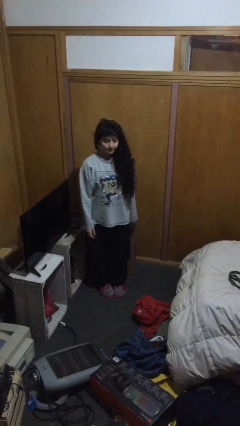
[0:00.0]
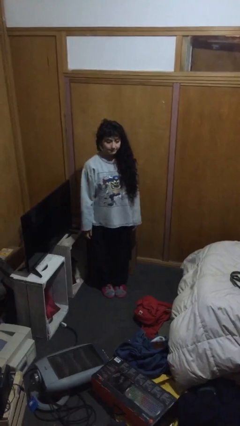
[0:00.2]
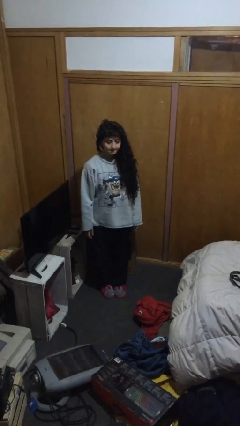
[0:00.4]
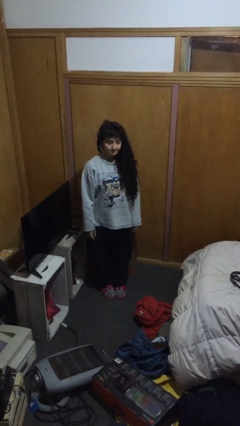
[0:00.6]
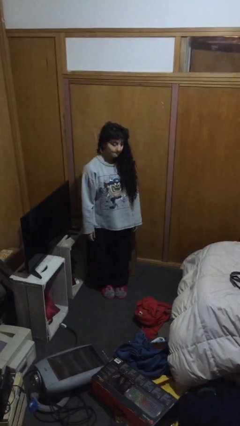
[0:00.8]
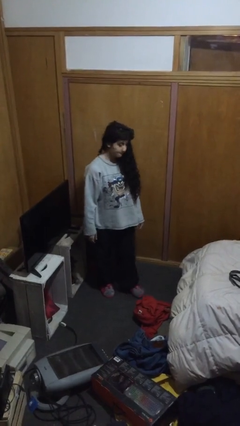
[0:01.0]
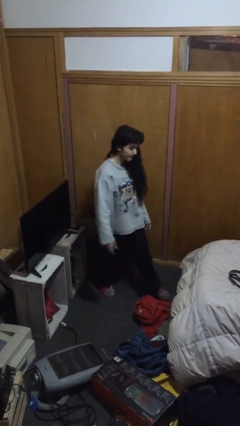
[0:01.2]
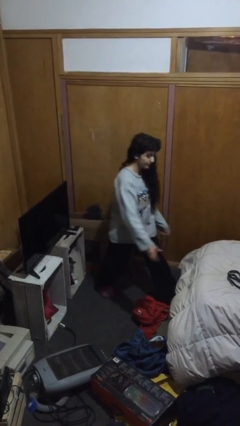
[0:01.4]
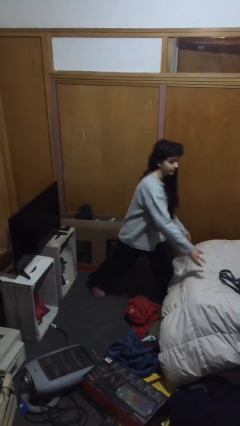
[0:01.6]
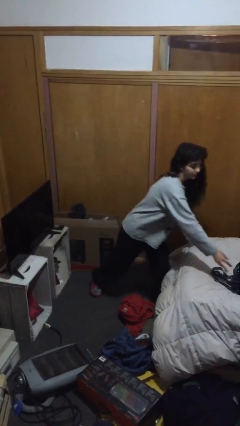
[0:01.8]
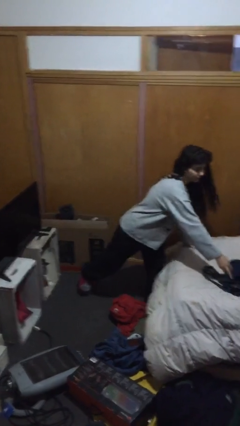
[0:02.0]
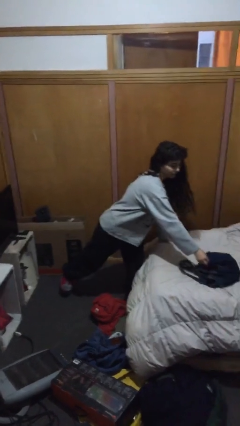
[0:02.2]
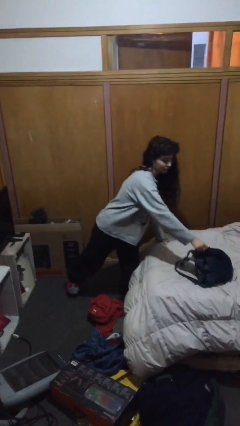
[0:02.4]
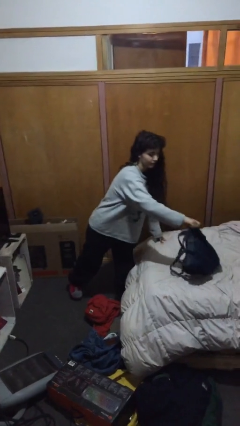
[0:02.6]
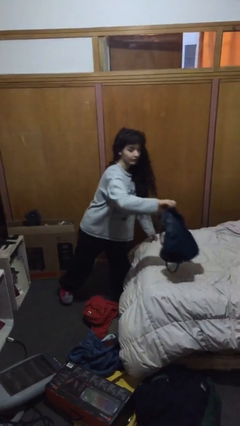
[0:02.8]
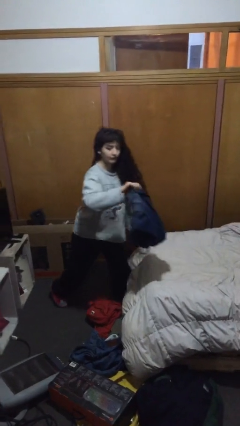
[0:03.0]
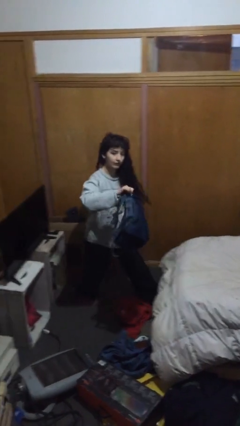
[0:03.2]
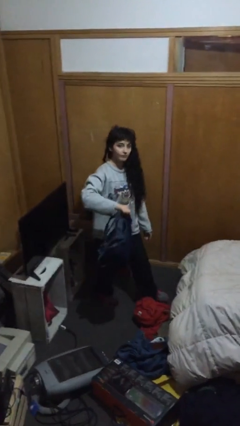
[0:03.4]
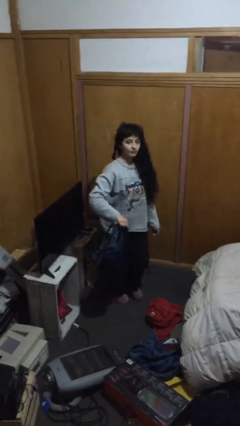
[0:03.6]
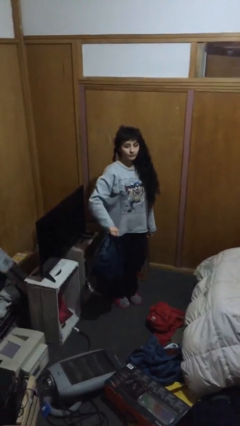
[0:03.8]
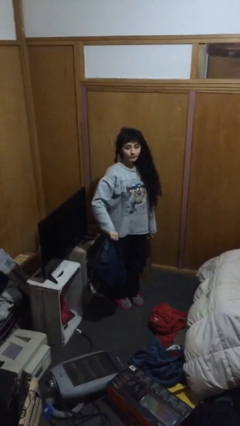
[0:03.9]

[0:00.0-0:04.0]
person picks up object from bed

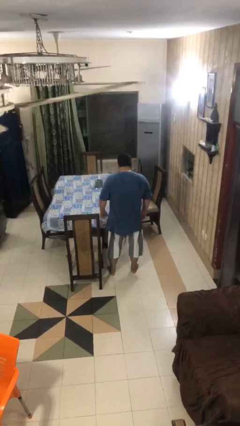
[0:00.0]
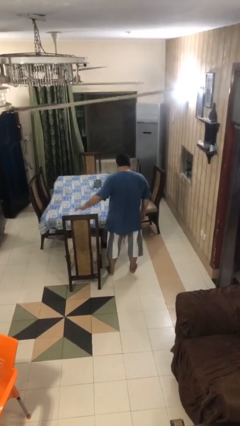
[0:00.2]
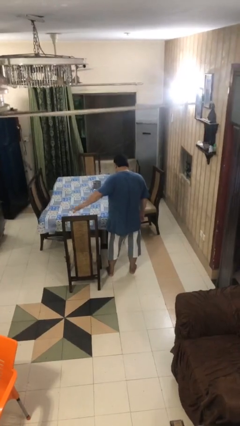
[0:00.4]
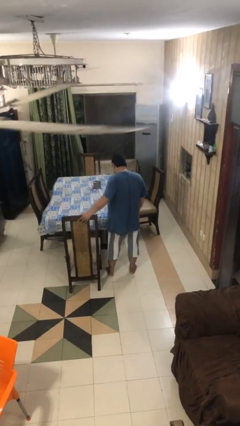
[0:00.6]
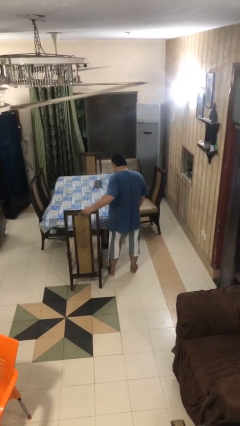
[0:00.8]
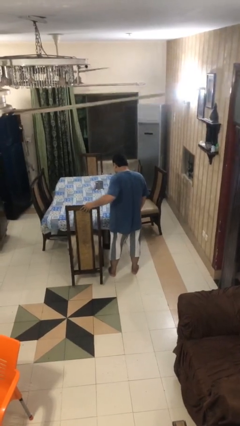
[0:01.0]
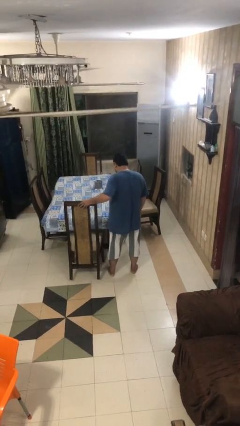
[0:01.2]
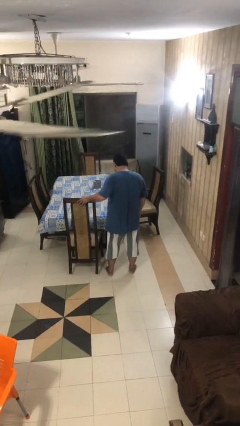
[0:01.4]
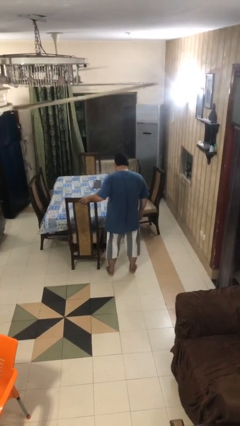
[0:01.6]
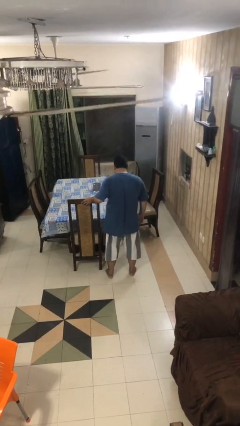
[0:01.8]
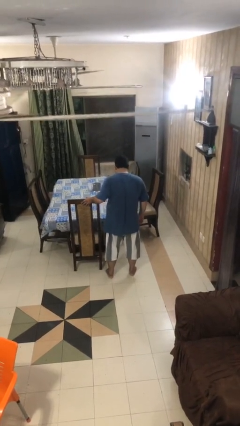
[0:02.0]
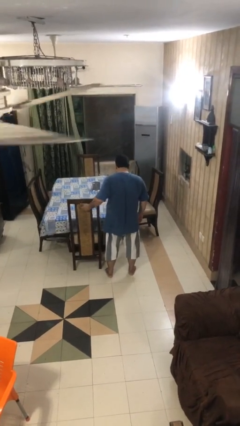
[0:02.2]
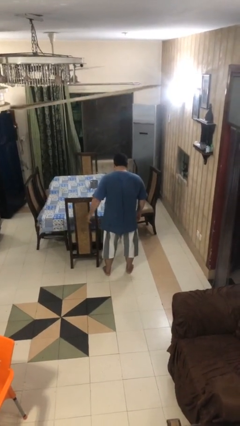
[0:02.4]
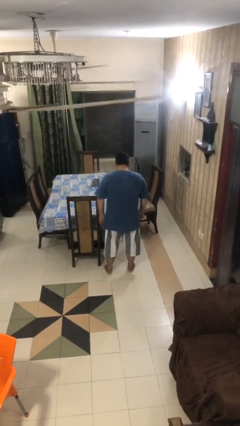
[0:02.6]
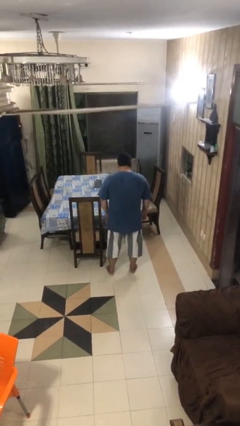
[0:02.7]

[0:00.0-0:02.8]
person pushes in chair

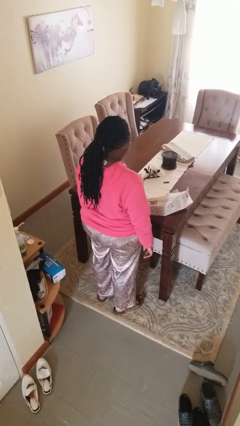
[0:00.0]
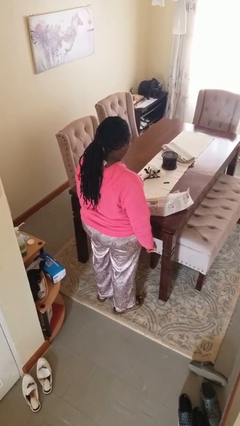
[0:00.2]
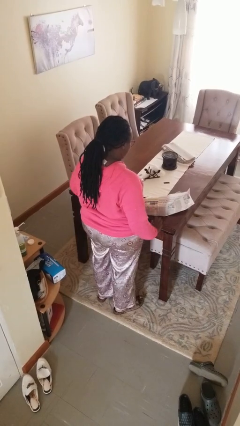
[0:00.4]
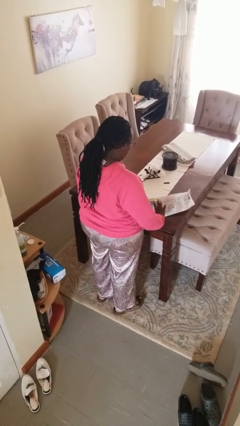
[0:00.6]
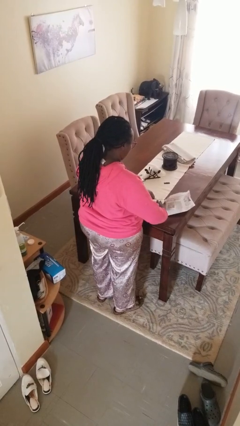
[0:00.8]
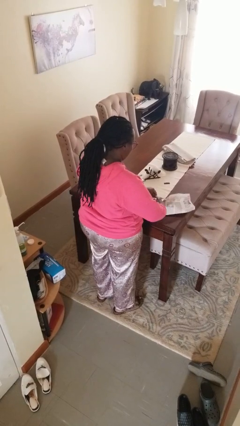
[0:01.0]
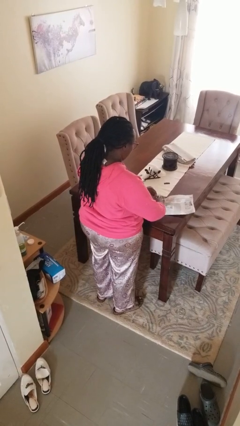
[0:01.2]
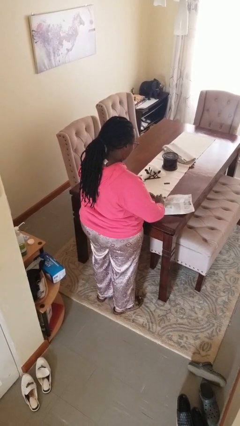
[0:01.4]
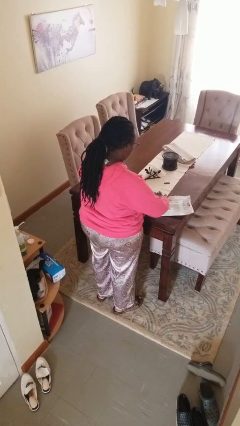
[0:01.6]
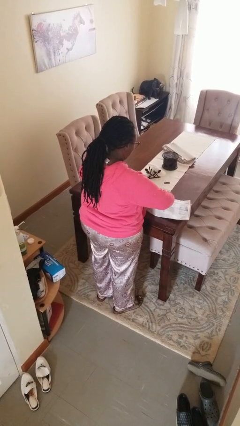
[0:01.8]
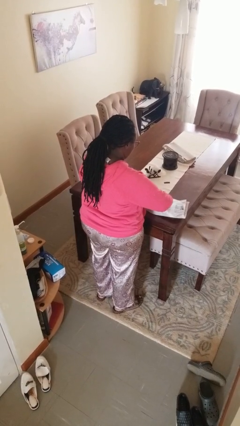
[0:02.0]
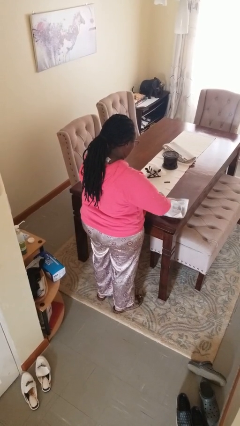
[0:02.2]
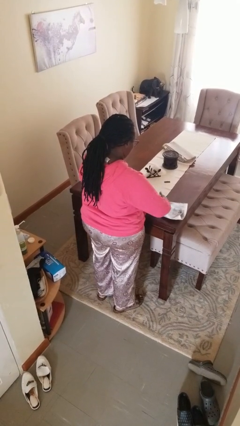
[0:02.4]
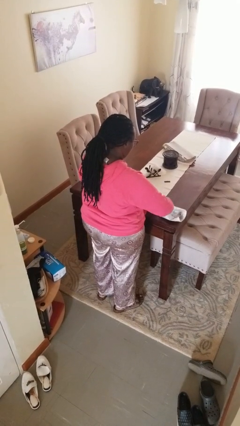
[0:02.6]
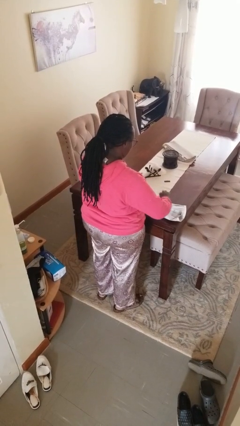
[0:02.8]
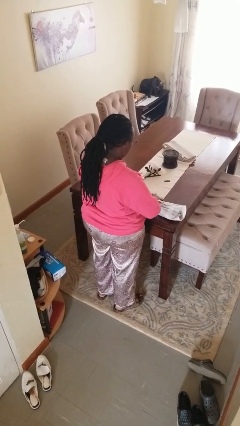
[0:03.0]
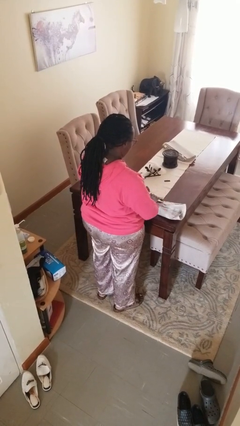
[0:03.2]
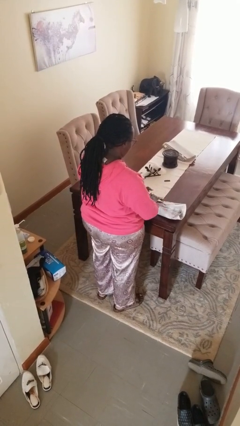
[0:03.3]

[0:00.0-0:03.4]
person wraps box

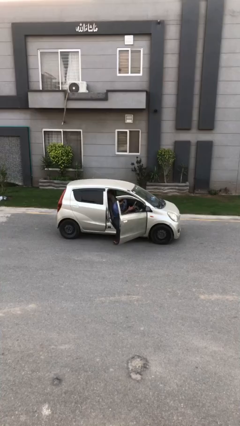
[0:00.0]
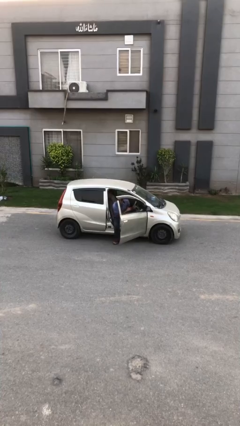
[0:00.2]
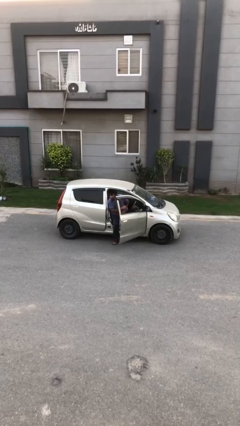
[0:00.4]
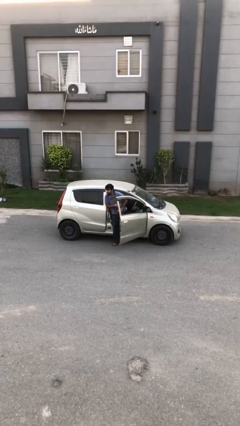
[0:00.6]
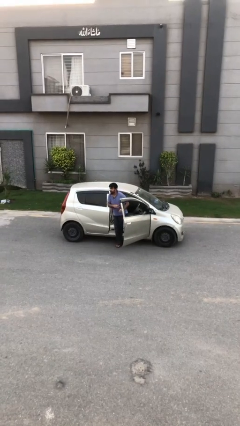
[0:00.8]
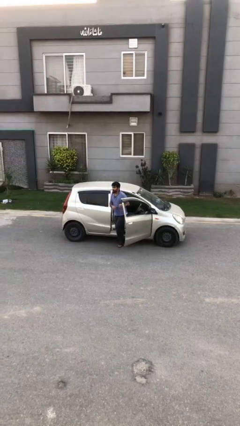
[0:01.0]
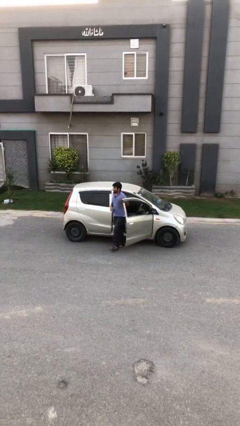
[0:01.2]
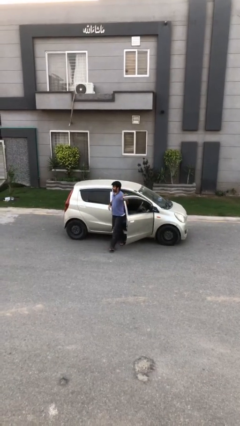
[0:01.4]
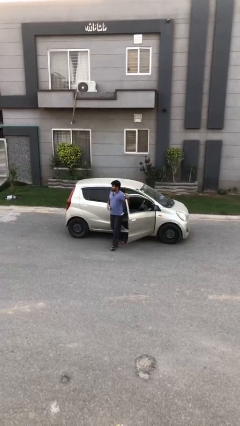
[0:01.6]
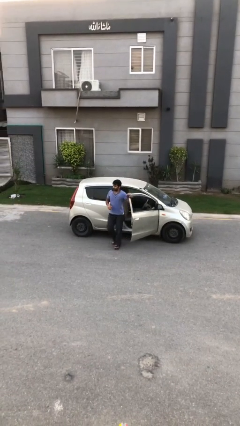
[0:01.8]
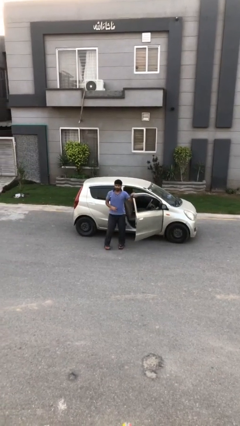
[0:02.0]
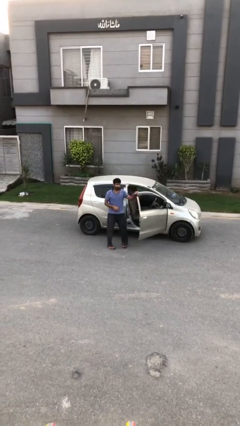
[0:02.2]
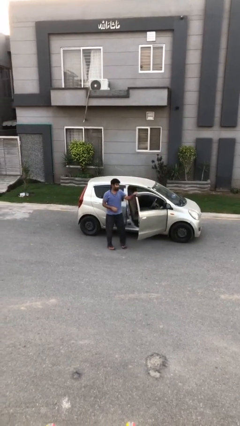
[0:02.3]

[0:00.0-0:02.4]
person exits car

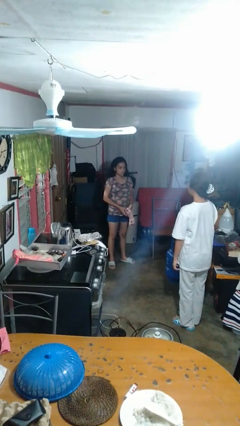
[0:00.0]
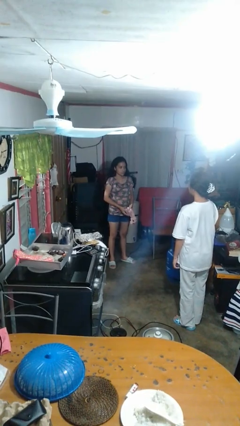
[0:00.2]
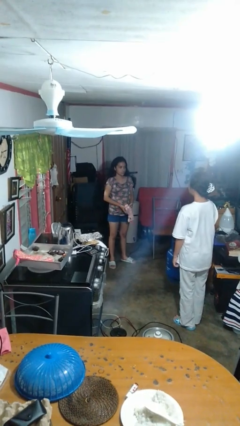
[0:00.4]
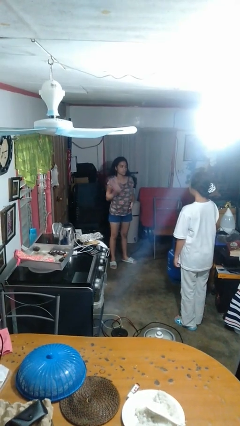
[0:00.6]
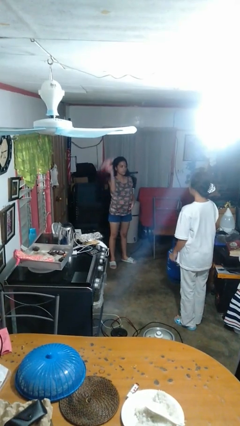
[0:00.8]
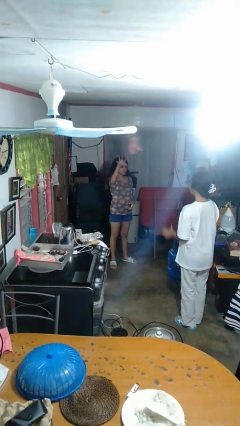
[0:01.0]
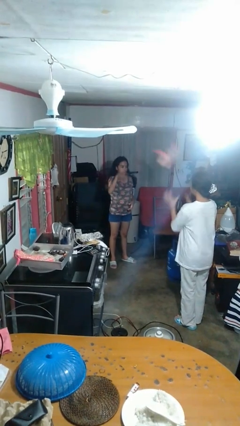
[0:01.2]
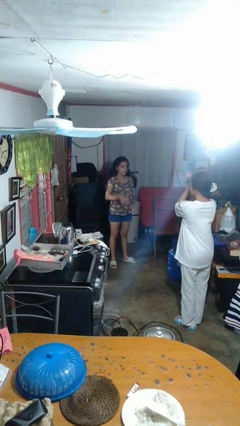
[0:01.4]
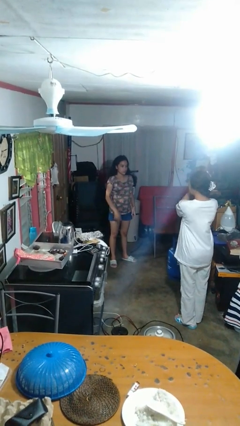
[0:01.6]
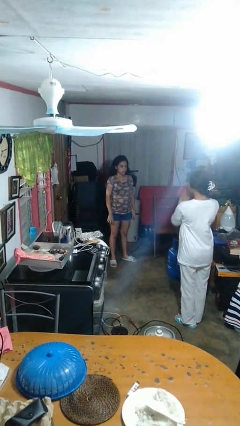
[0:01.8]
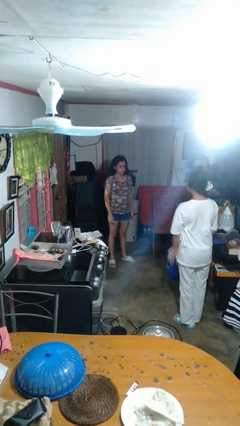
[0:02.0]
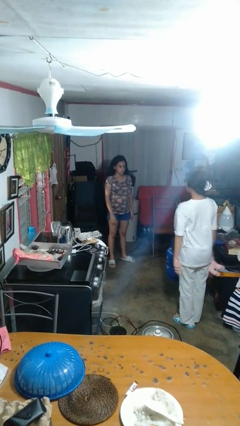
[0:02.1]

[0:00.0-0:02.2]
person throws object to person

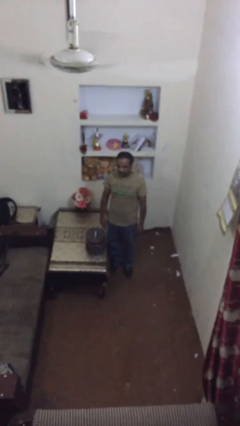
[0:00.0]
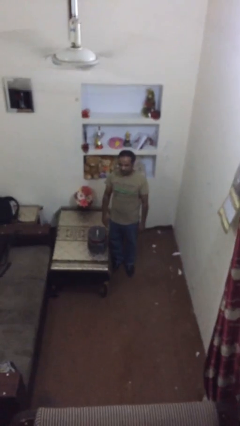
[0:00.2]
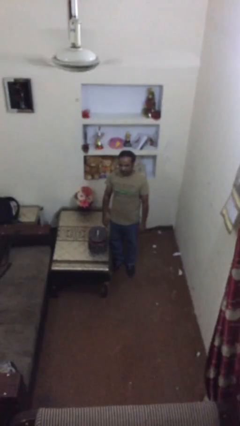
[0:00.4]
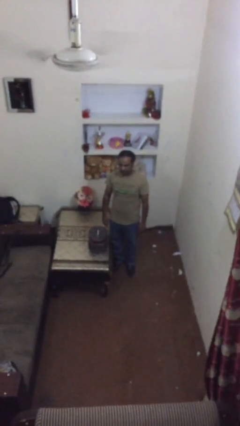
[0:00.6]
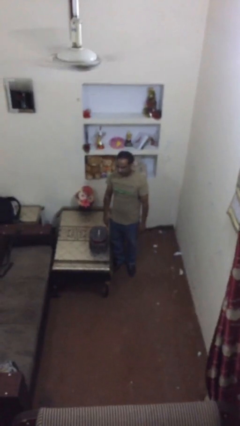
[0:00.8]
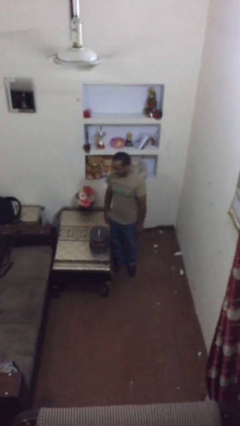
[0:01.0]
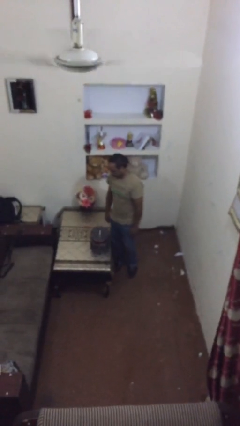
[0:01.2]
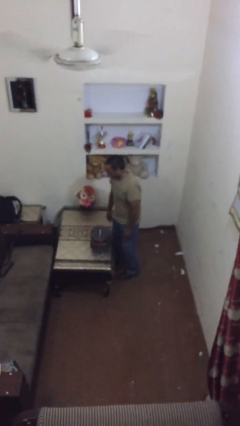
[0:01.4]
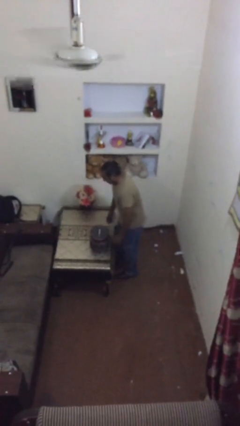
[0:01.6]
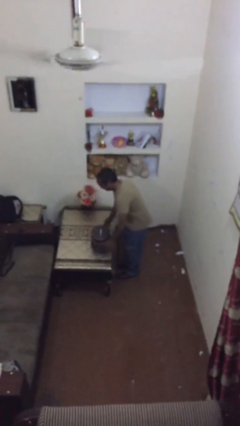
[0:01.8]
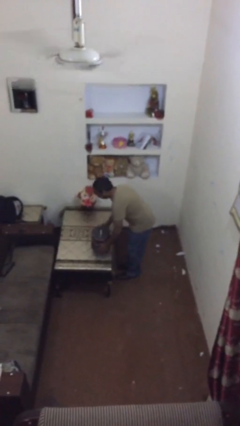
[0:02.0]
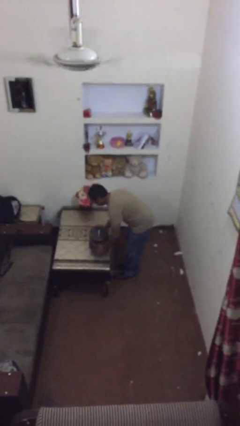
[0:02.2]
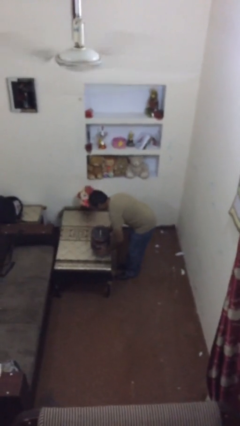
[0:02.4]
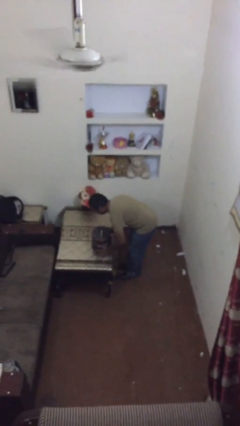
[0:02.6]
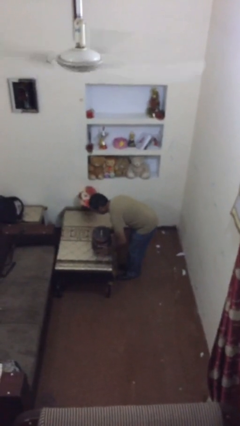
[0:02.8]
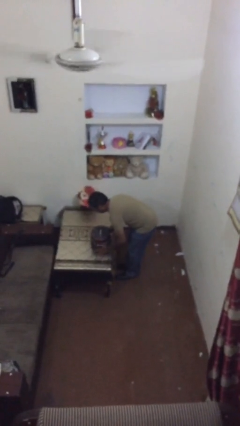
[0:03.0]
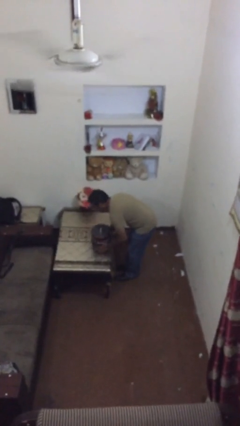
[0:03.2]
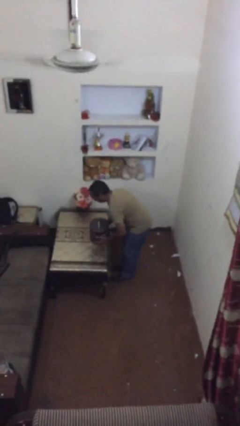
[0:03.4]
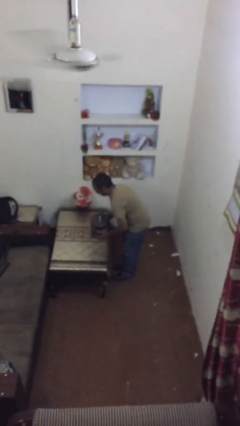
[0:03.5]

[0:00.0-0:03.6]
person picks up object from table
